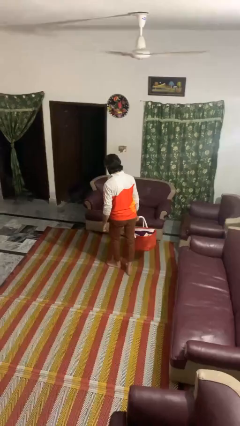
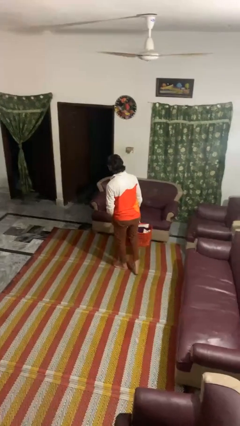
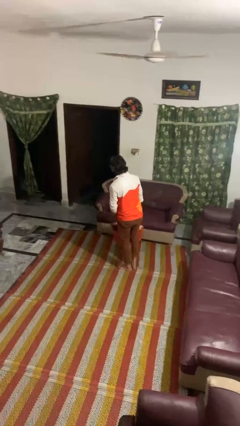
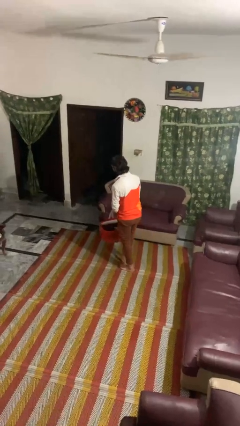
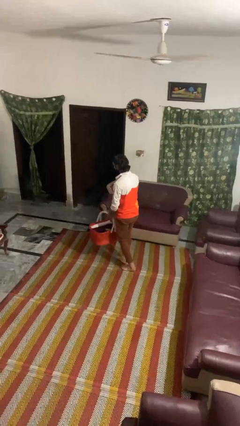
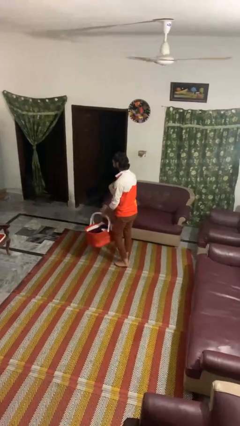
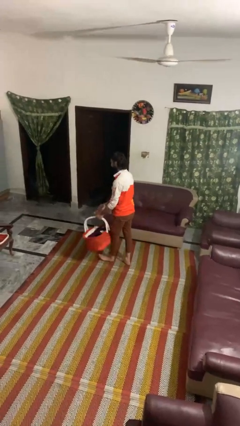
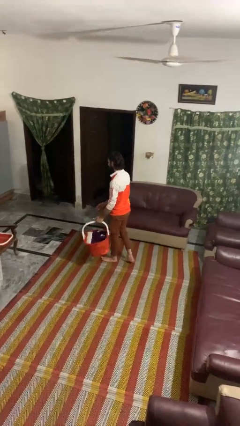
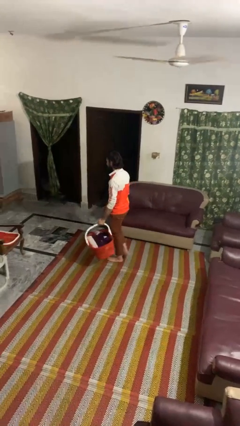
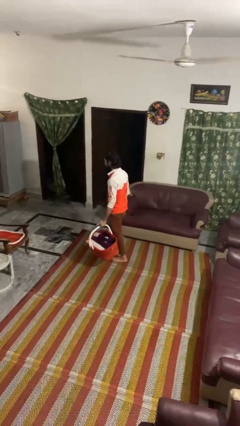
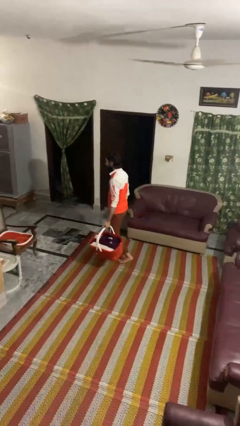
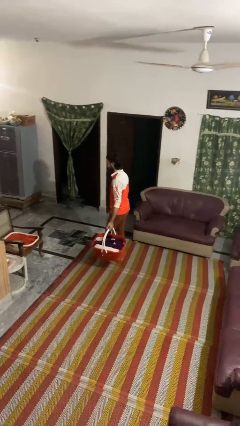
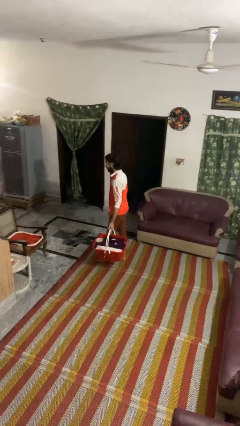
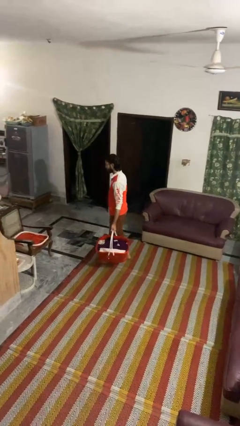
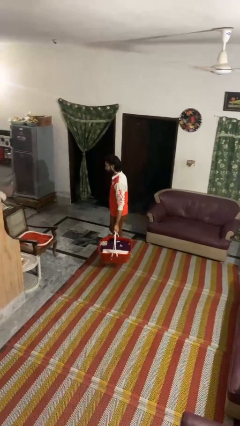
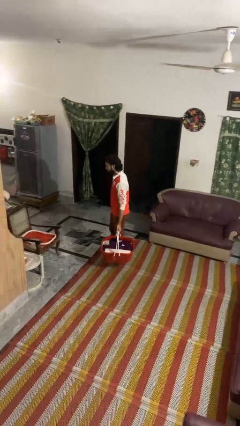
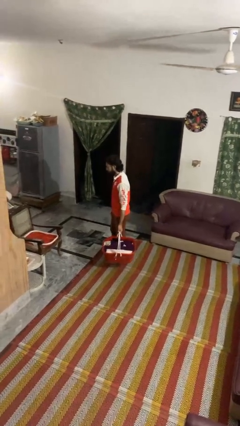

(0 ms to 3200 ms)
person carries laundry basket

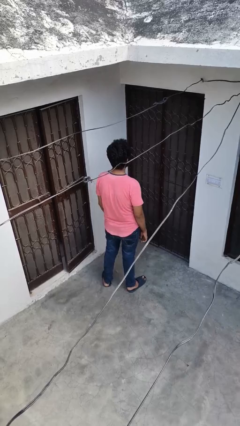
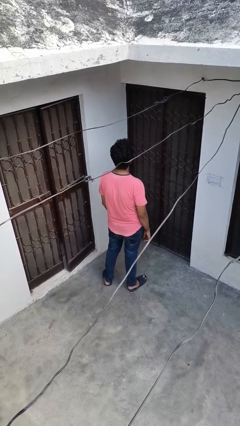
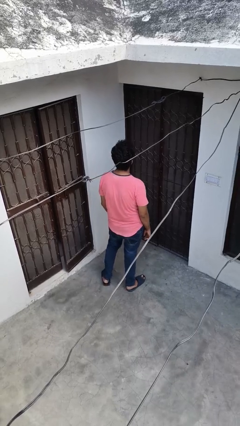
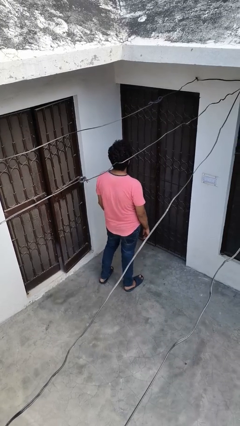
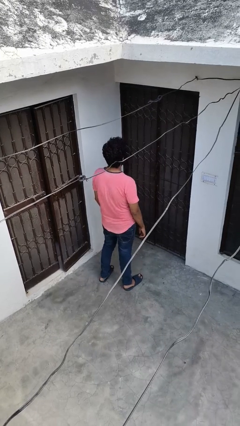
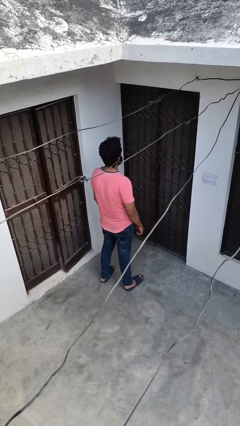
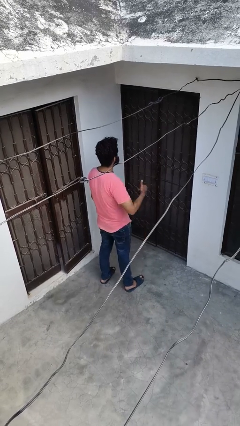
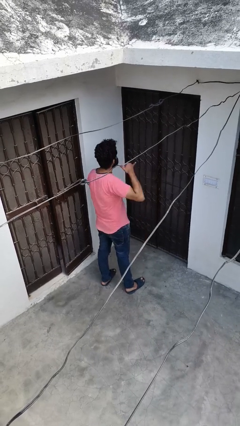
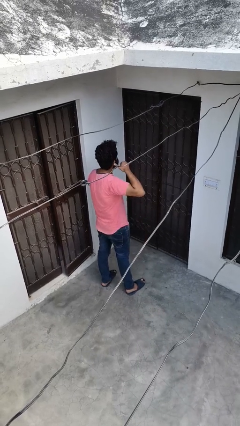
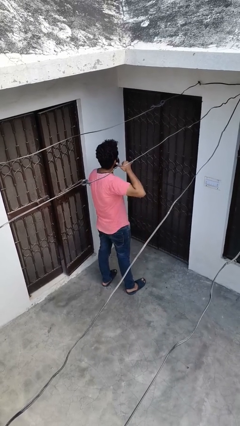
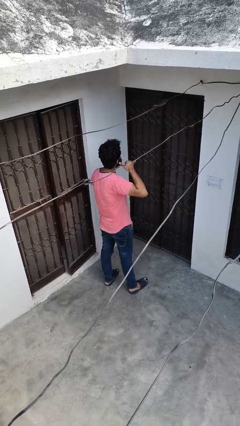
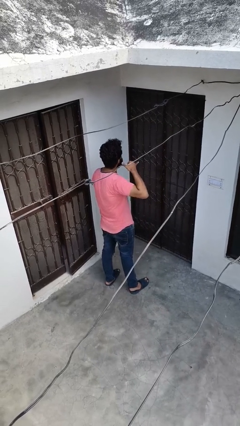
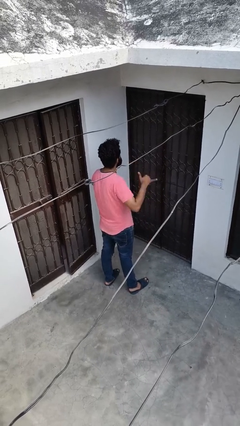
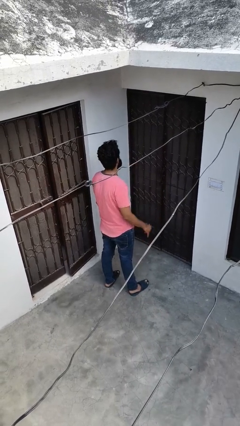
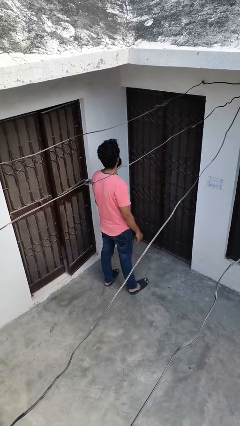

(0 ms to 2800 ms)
person gestures call me

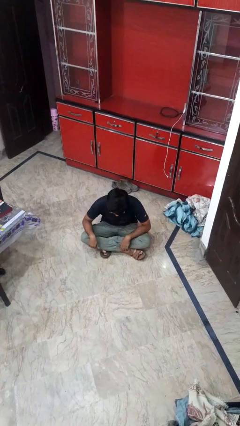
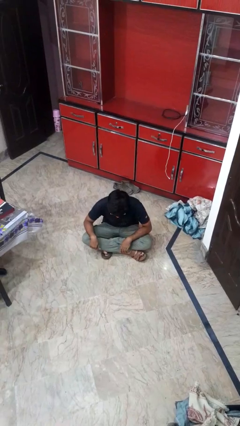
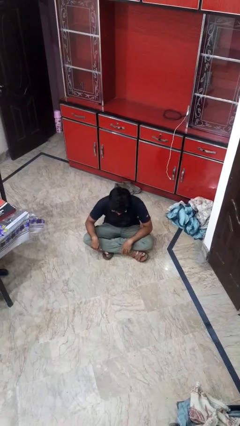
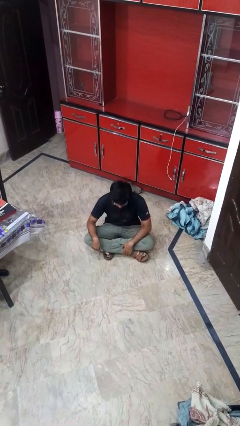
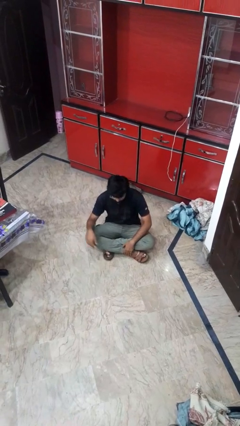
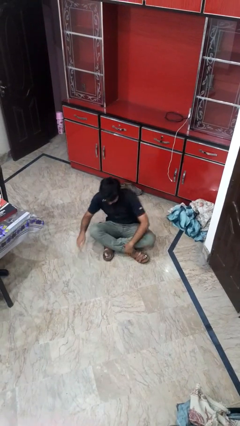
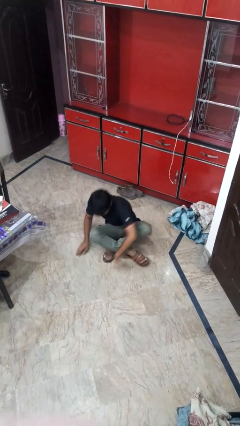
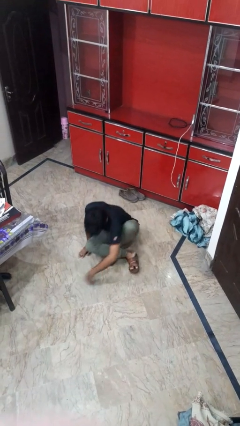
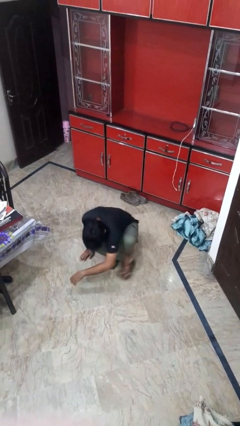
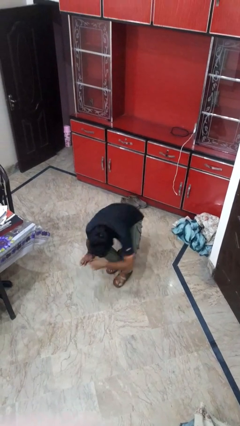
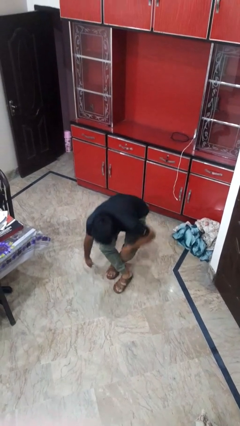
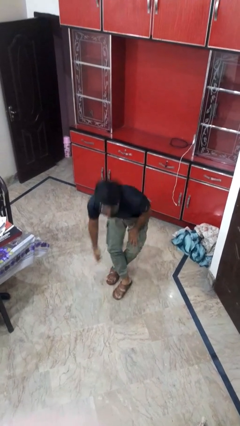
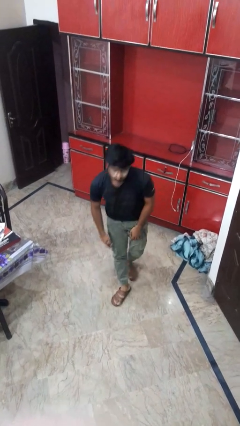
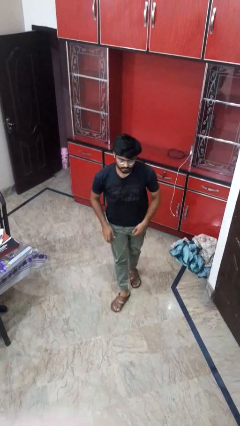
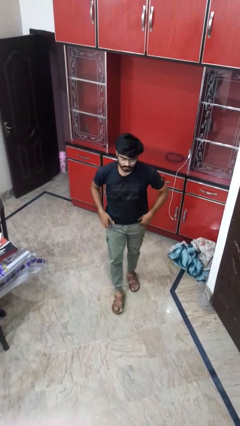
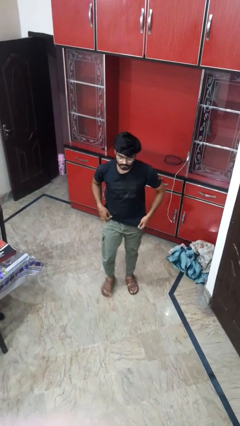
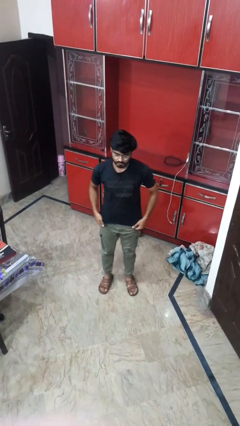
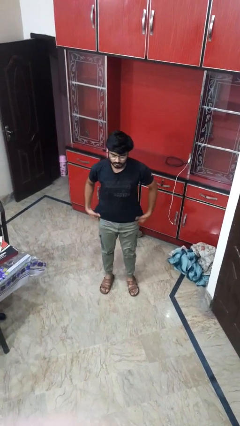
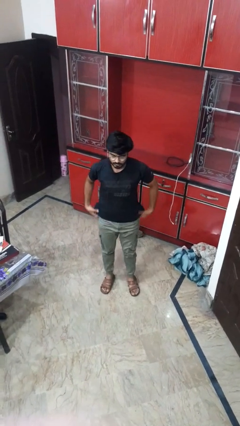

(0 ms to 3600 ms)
person stands up from floor

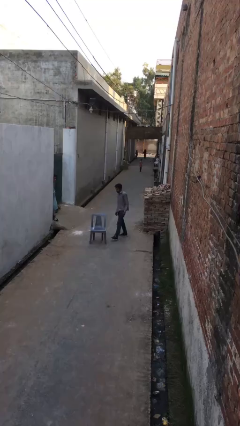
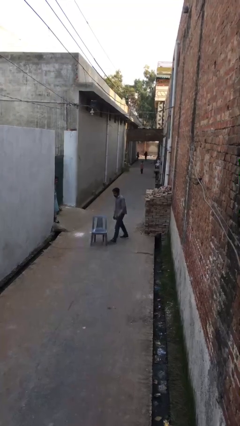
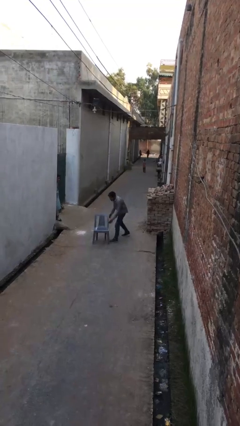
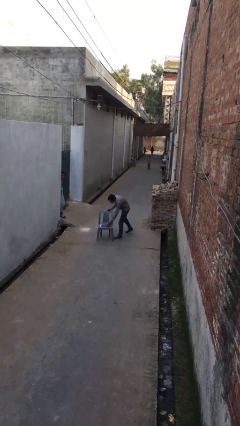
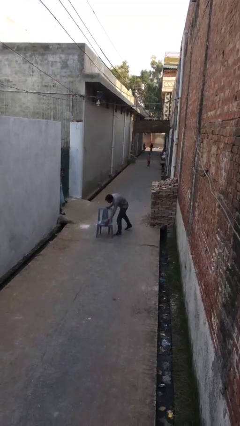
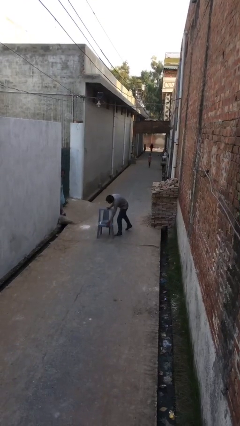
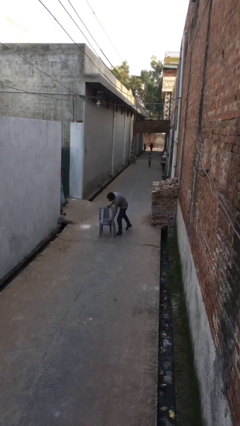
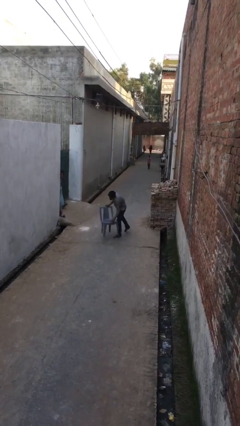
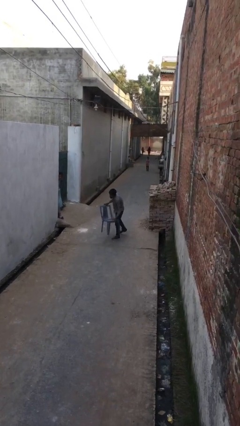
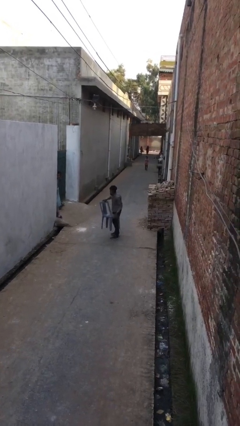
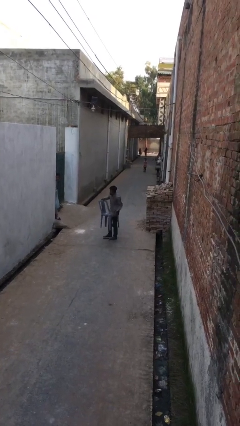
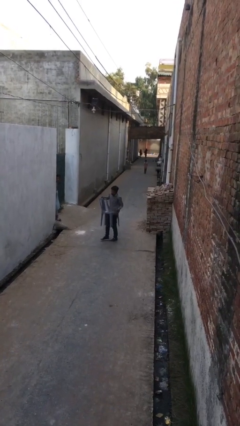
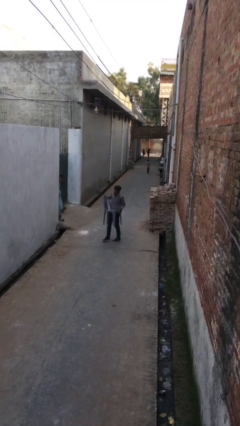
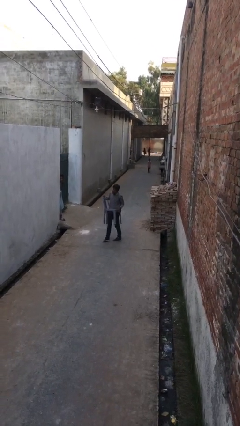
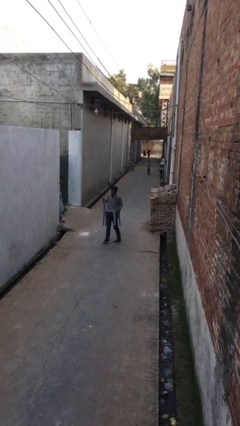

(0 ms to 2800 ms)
person picks up object from floor

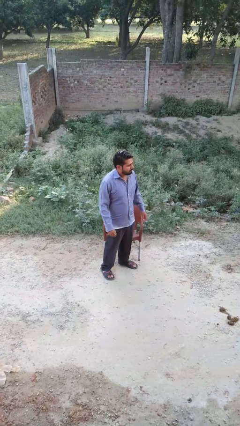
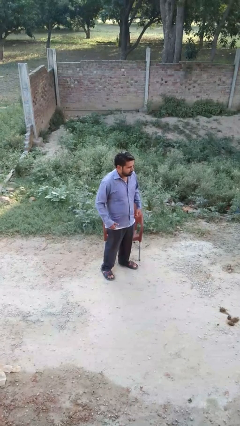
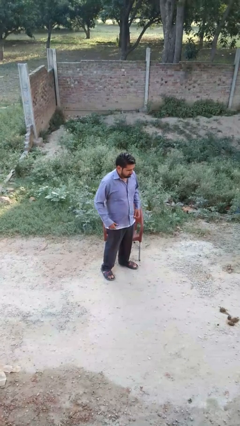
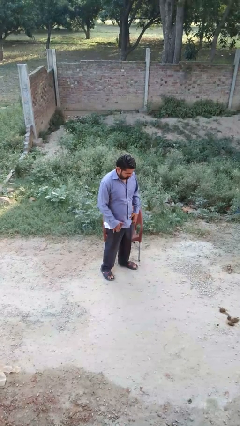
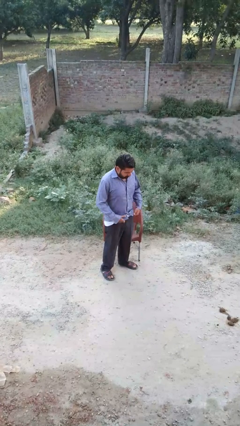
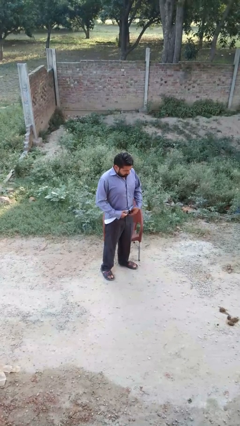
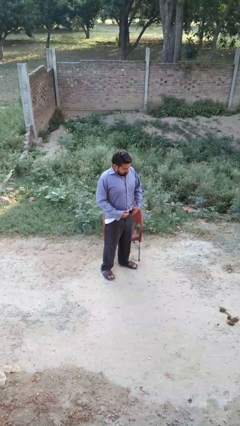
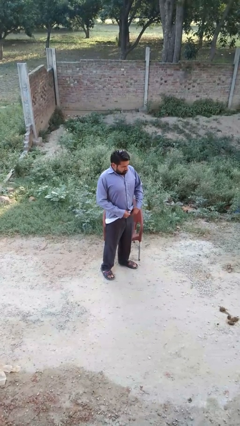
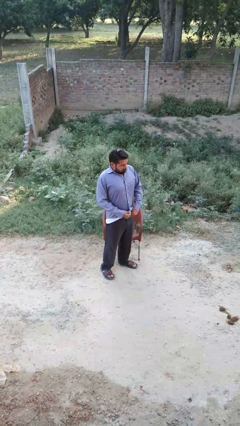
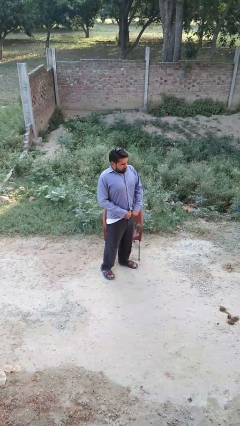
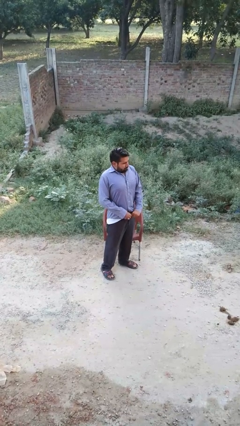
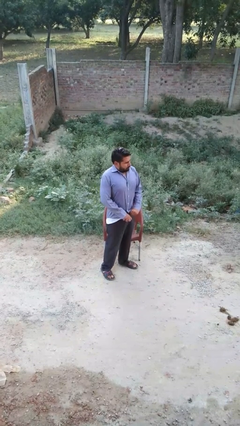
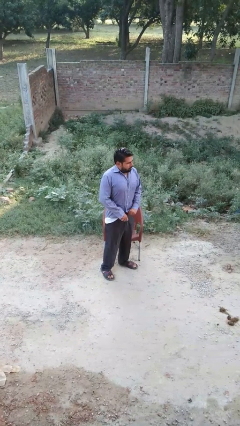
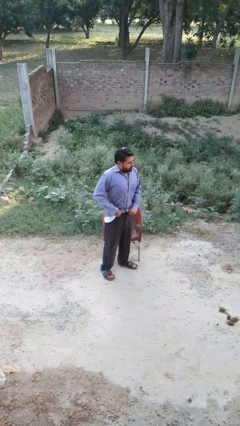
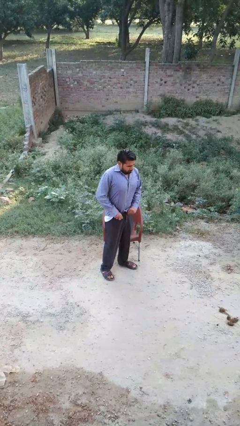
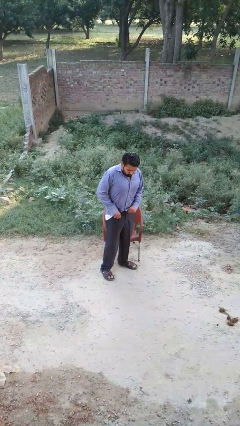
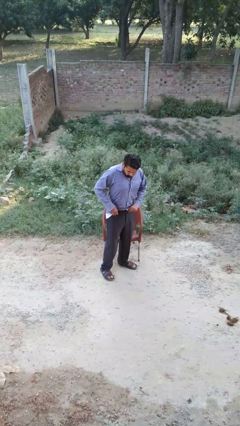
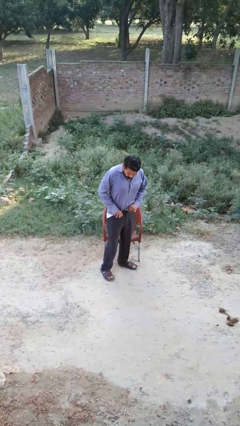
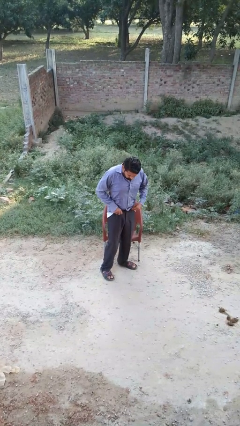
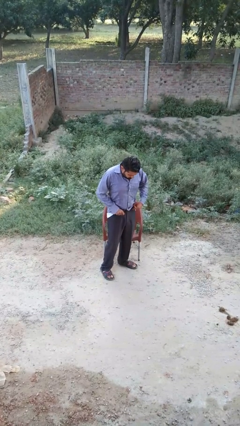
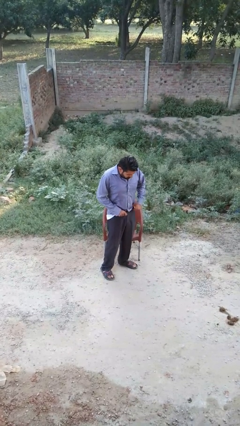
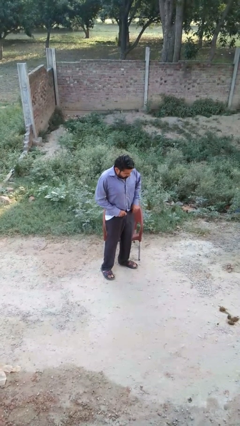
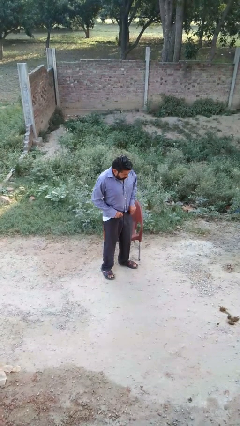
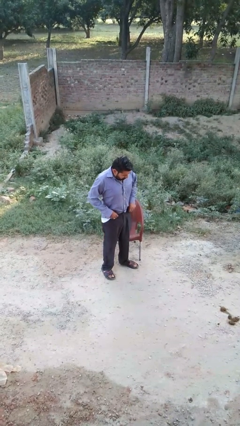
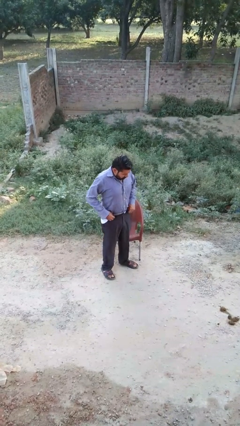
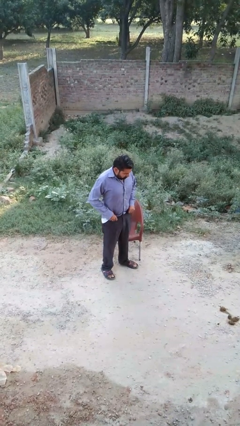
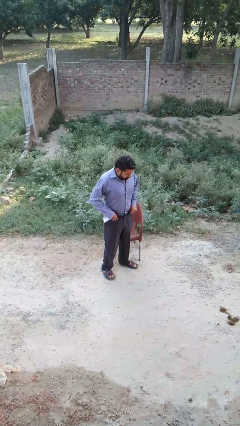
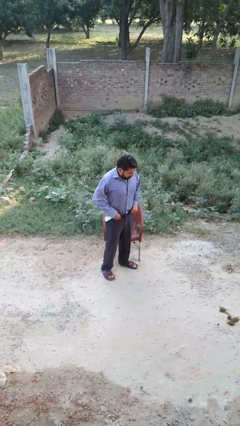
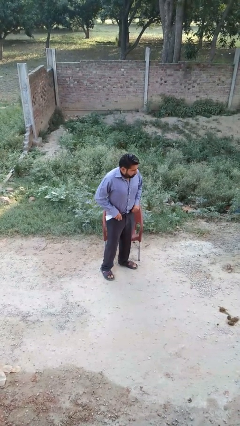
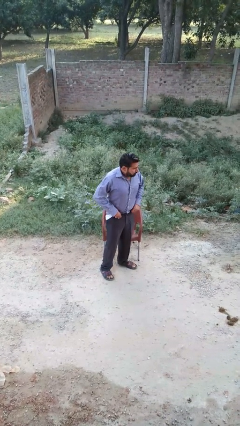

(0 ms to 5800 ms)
person tucks in shirt
